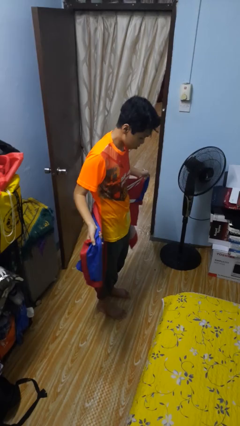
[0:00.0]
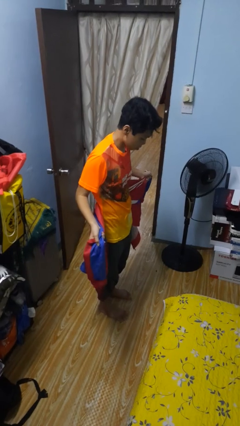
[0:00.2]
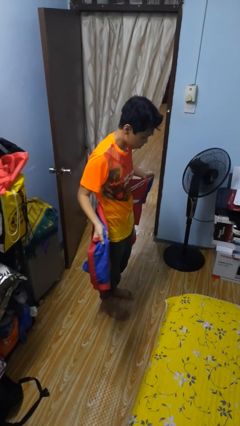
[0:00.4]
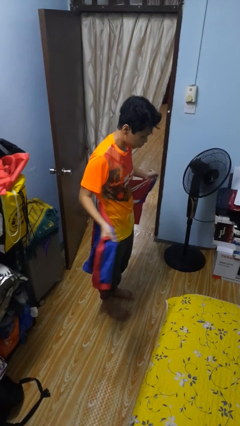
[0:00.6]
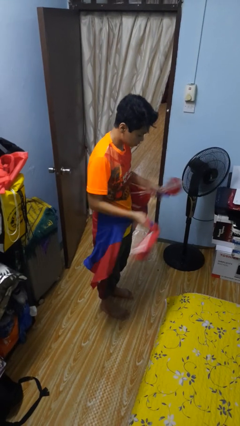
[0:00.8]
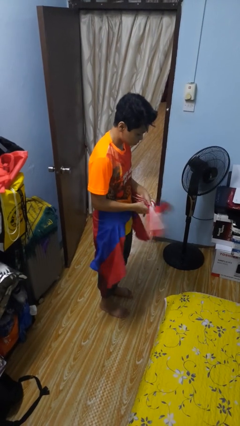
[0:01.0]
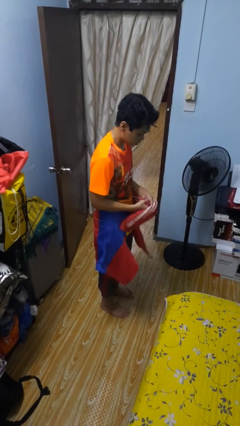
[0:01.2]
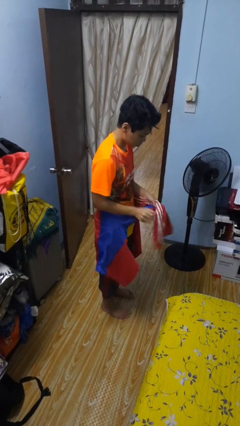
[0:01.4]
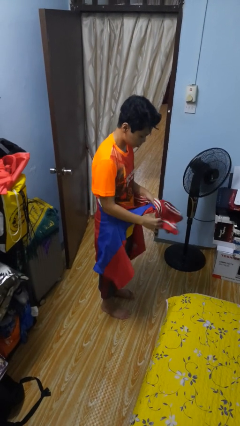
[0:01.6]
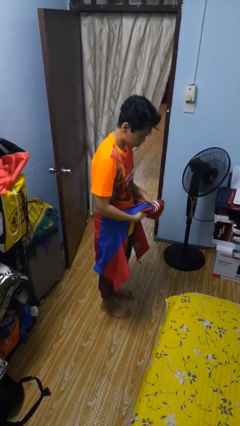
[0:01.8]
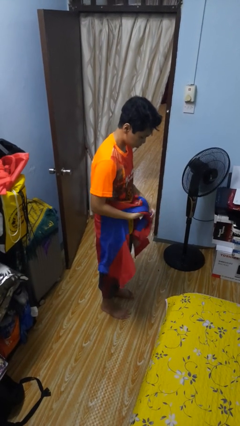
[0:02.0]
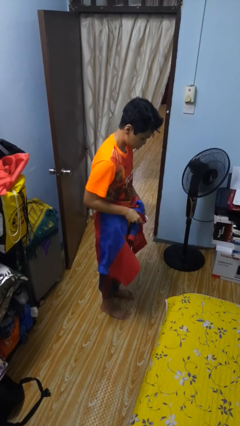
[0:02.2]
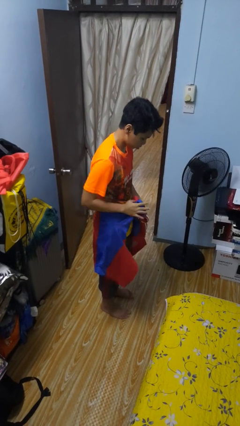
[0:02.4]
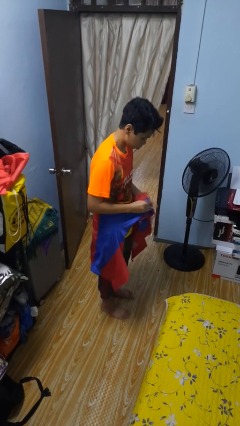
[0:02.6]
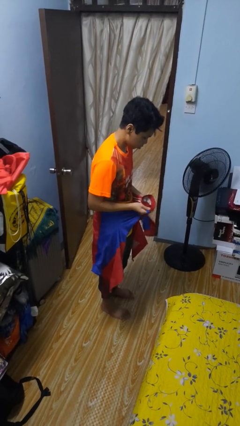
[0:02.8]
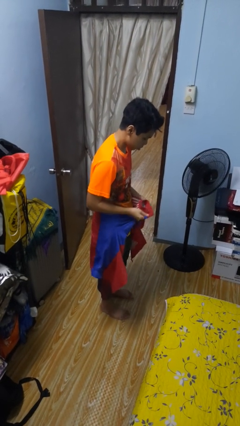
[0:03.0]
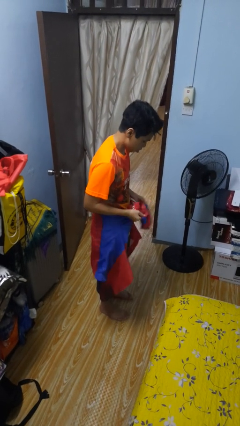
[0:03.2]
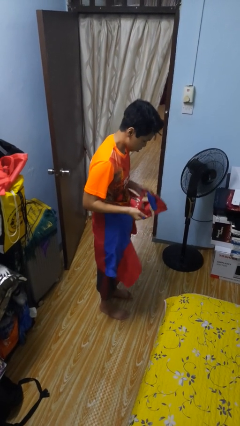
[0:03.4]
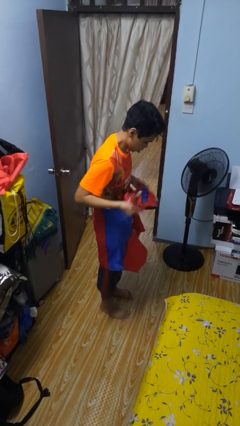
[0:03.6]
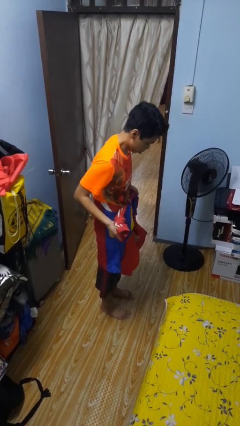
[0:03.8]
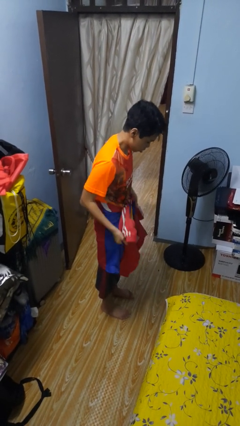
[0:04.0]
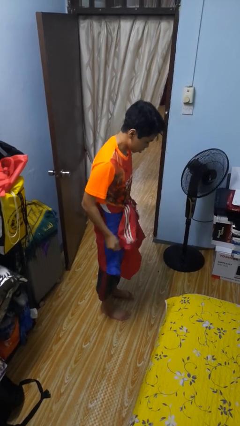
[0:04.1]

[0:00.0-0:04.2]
person ties jacket around waist

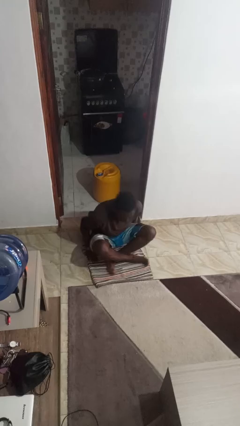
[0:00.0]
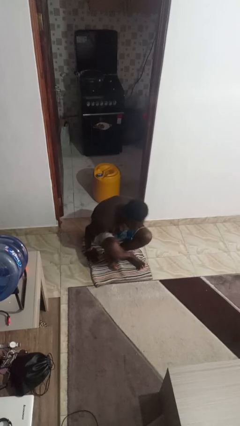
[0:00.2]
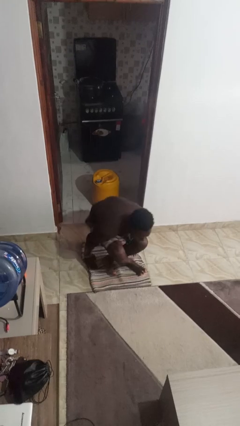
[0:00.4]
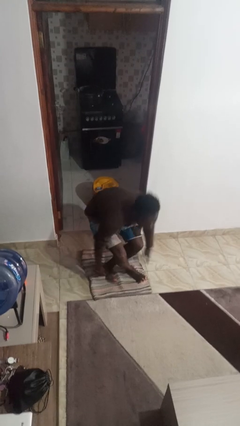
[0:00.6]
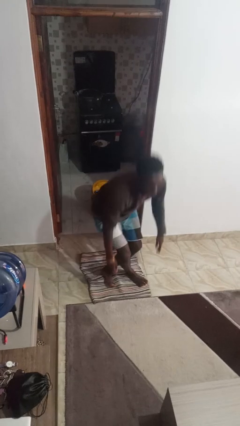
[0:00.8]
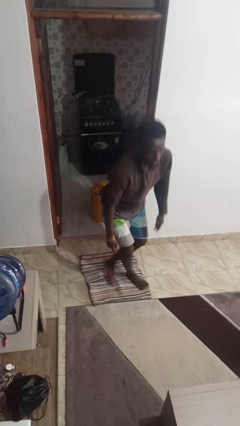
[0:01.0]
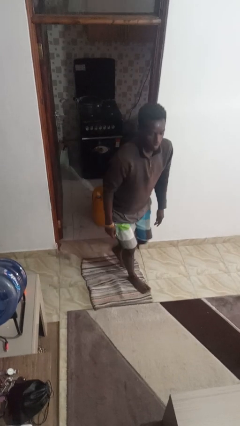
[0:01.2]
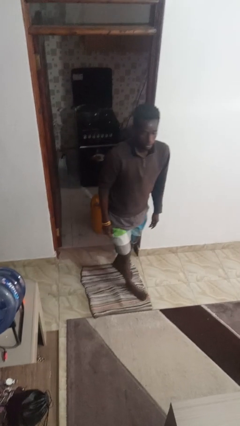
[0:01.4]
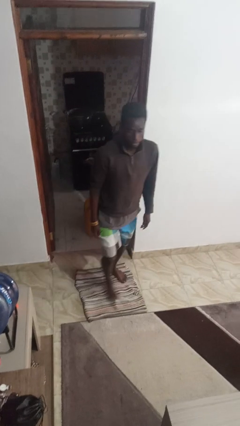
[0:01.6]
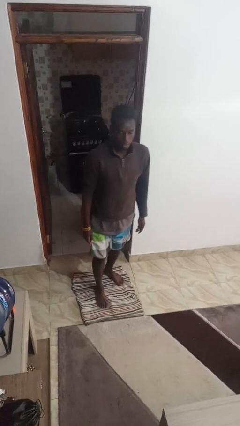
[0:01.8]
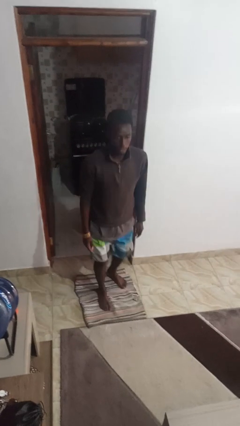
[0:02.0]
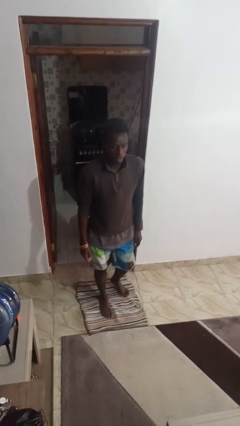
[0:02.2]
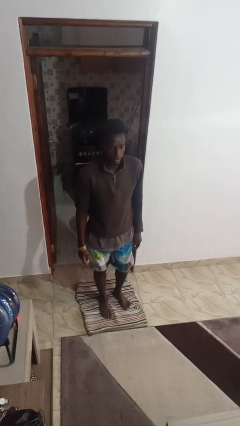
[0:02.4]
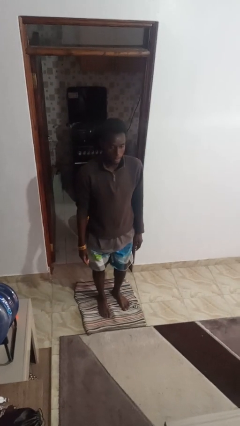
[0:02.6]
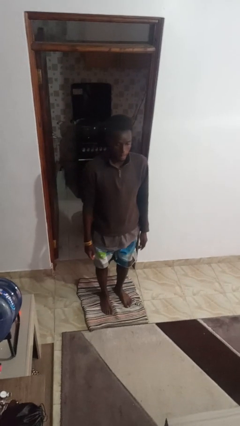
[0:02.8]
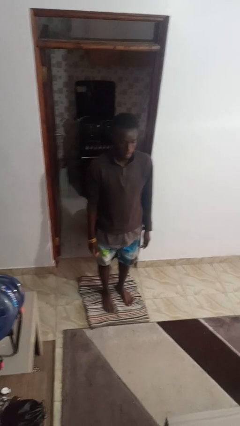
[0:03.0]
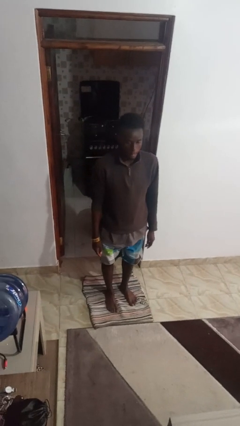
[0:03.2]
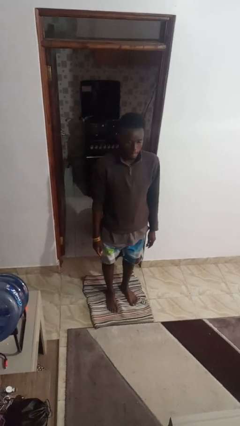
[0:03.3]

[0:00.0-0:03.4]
person stands up from floor

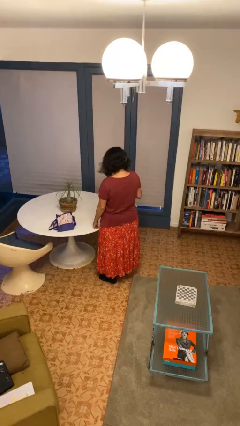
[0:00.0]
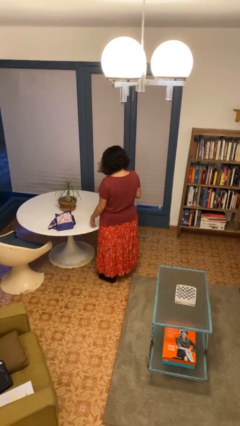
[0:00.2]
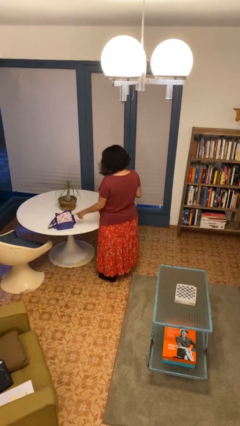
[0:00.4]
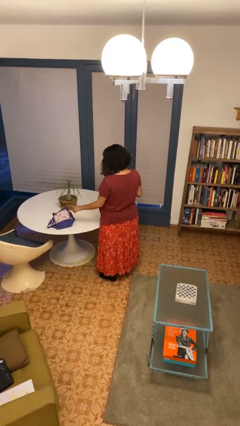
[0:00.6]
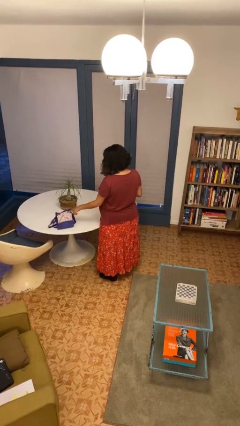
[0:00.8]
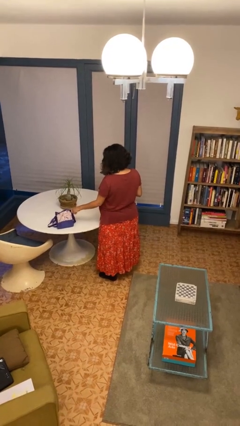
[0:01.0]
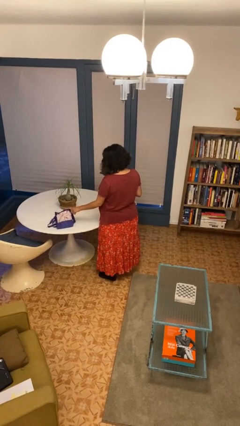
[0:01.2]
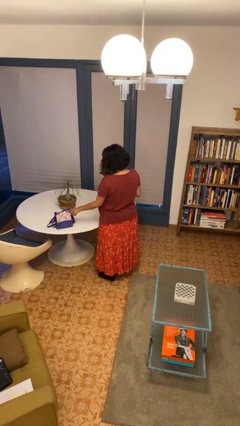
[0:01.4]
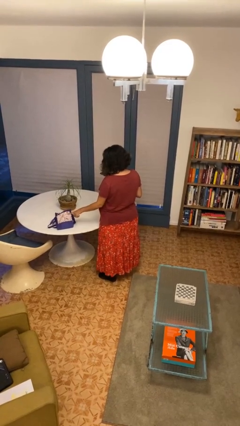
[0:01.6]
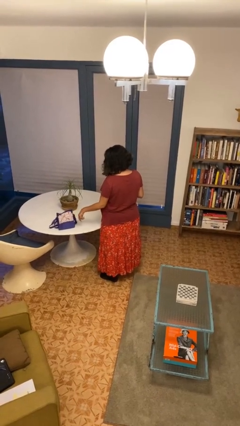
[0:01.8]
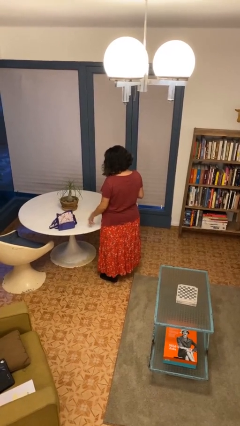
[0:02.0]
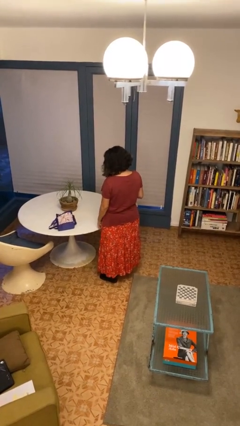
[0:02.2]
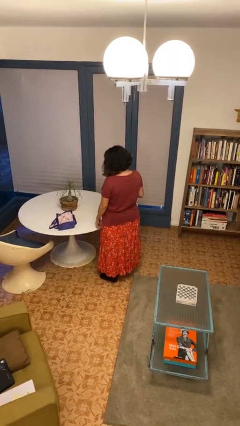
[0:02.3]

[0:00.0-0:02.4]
person taps object with finger

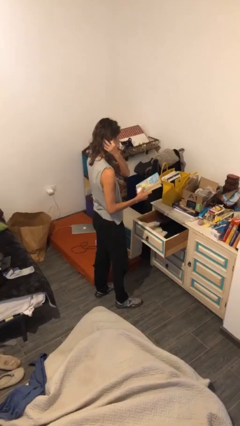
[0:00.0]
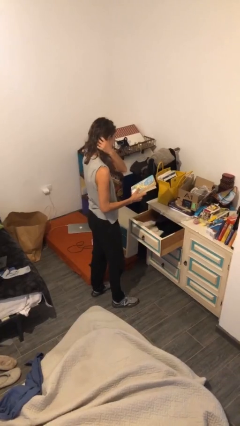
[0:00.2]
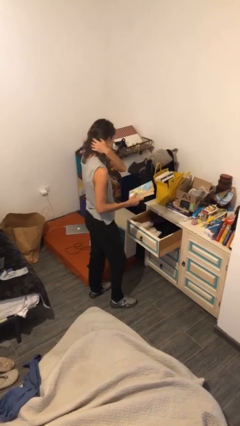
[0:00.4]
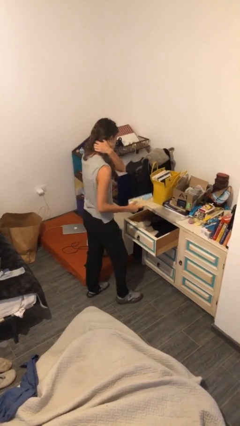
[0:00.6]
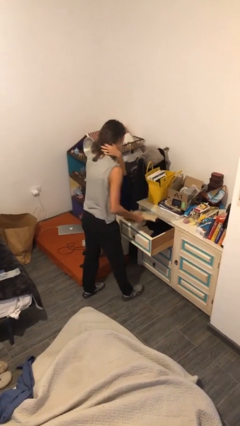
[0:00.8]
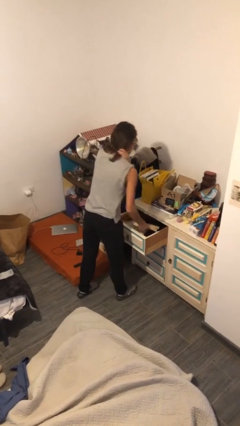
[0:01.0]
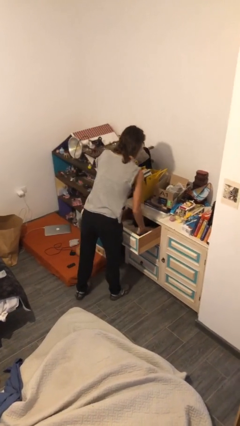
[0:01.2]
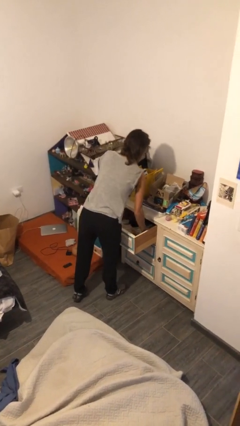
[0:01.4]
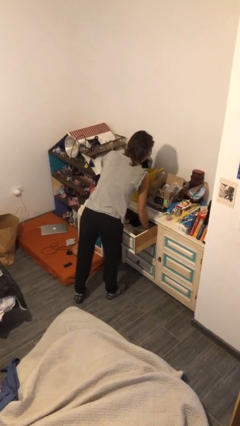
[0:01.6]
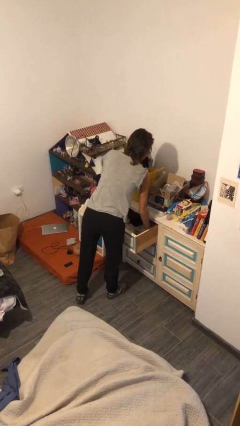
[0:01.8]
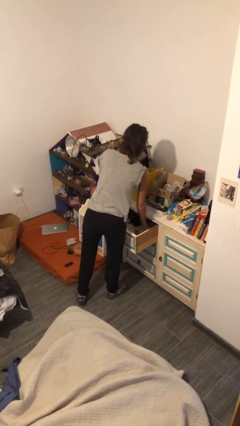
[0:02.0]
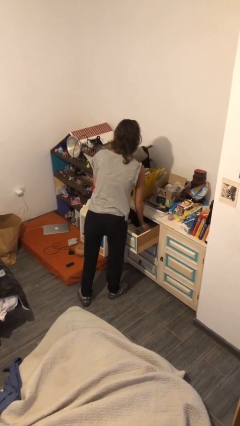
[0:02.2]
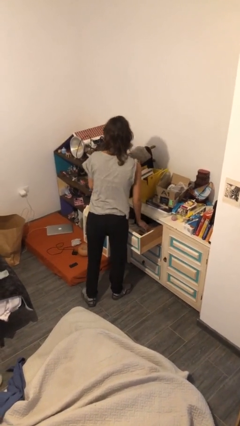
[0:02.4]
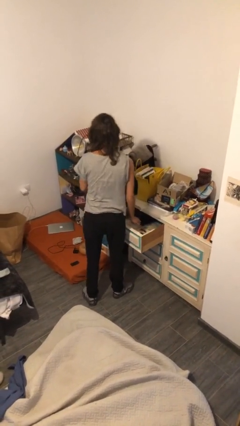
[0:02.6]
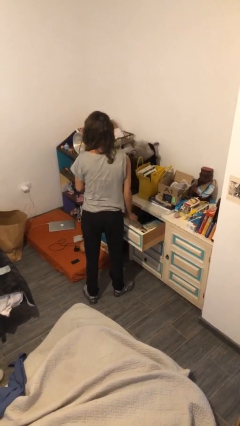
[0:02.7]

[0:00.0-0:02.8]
person puts down object into cabinet

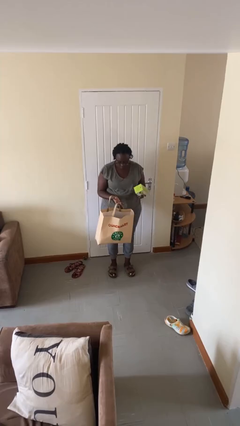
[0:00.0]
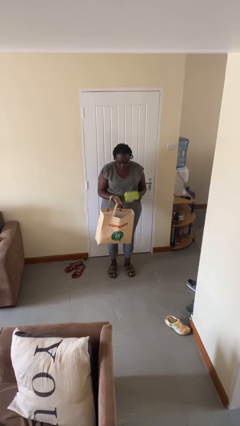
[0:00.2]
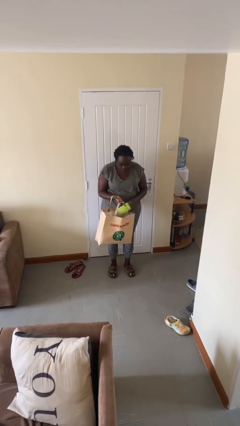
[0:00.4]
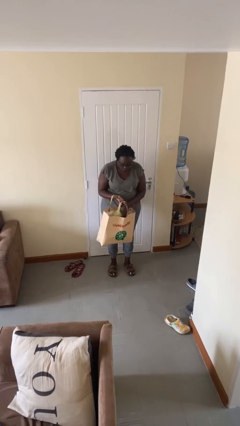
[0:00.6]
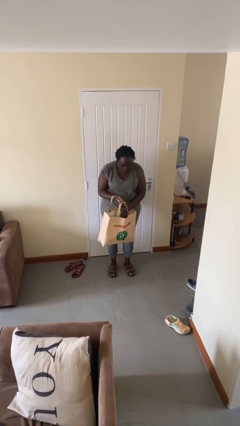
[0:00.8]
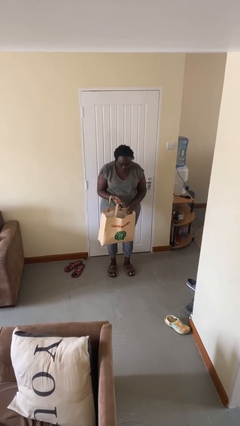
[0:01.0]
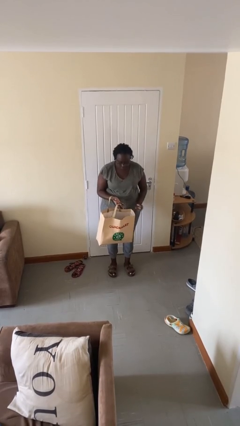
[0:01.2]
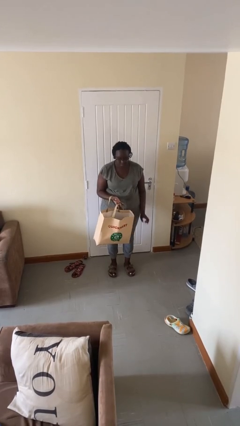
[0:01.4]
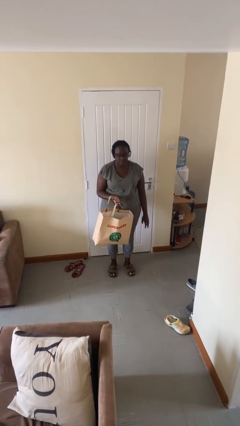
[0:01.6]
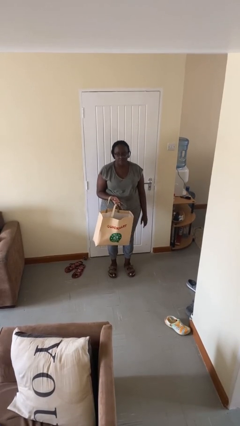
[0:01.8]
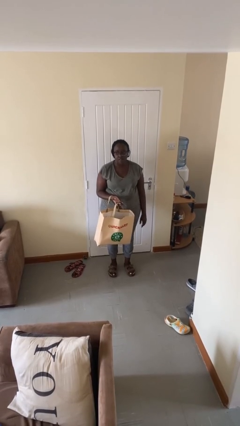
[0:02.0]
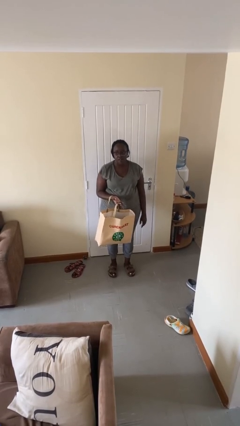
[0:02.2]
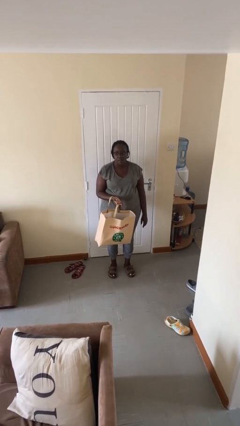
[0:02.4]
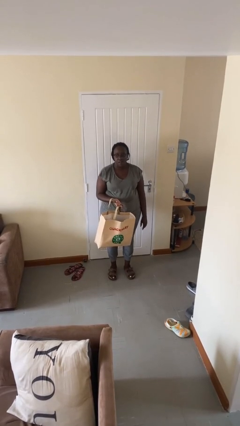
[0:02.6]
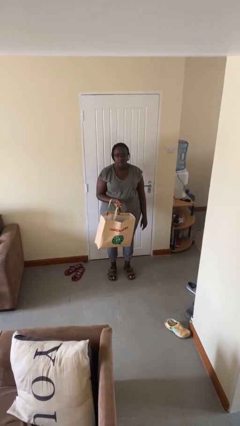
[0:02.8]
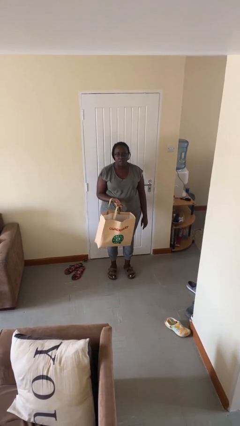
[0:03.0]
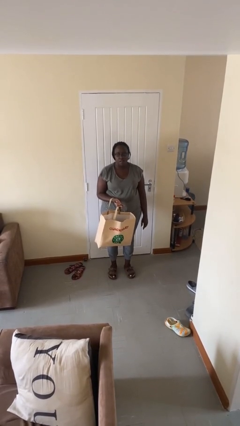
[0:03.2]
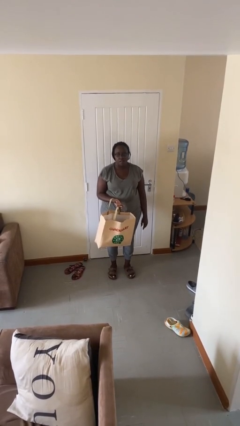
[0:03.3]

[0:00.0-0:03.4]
person puts object into bag

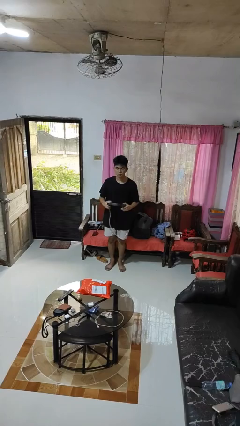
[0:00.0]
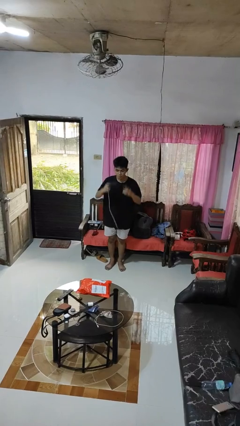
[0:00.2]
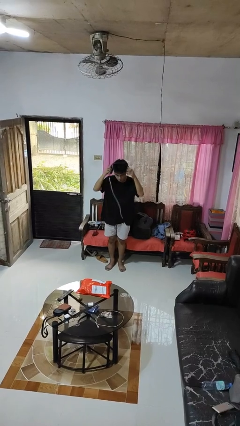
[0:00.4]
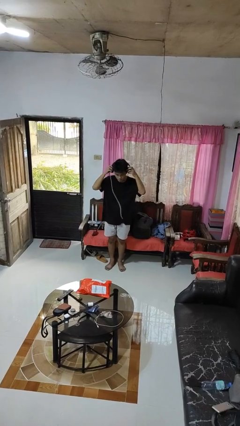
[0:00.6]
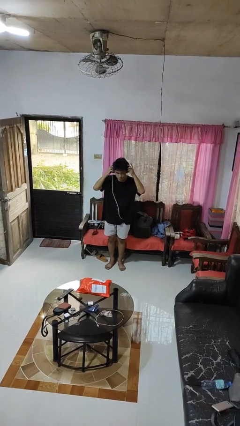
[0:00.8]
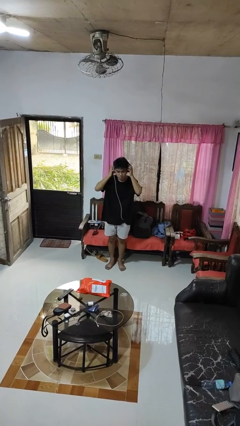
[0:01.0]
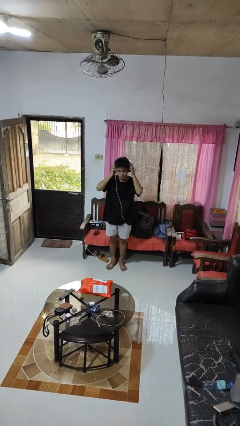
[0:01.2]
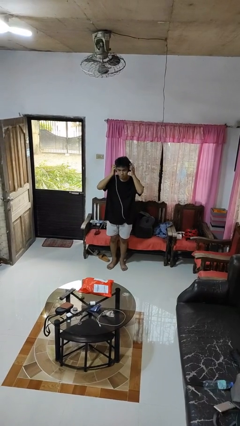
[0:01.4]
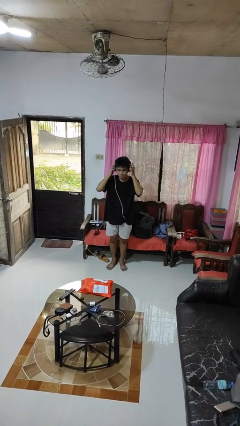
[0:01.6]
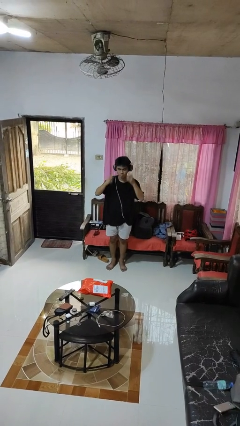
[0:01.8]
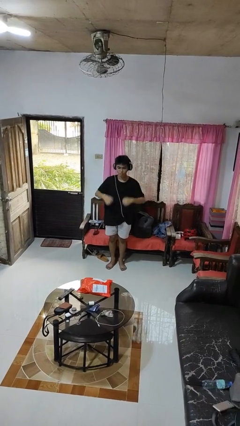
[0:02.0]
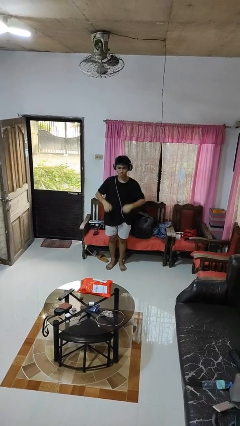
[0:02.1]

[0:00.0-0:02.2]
person puts on headphones
